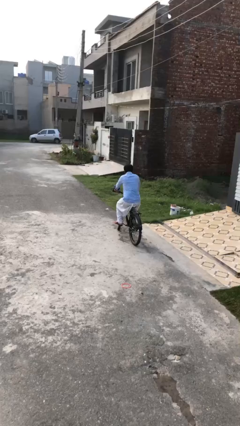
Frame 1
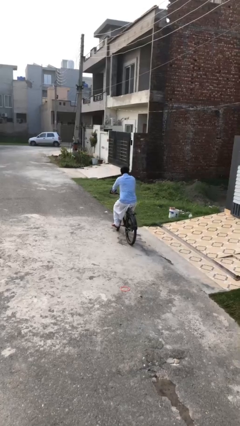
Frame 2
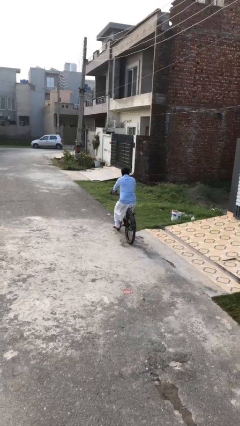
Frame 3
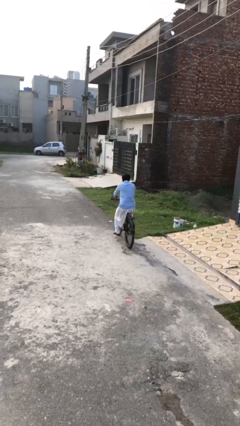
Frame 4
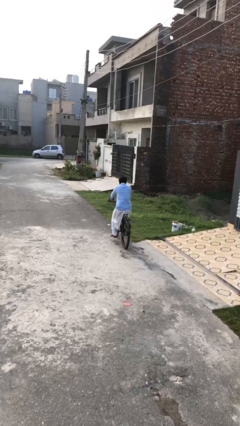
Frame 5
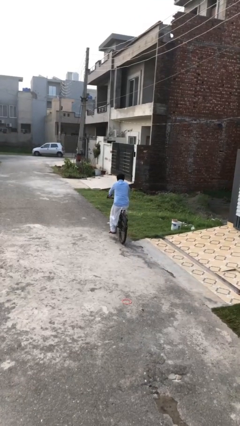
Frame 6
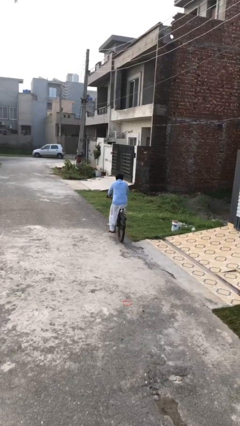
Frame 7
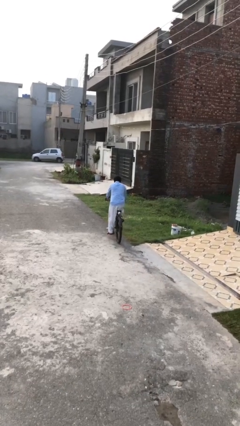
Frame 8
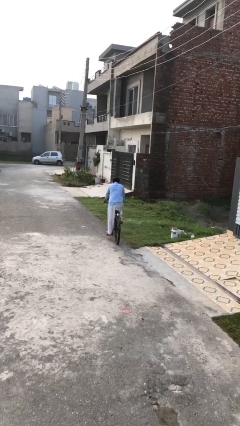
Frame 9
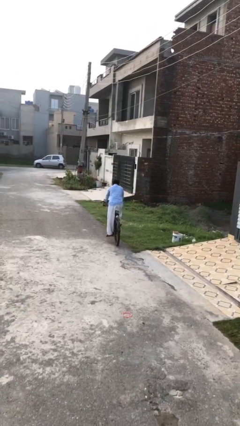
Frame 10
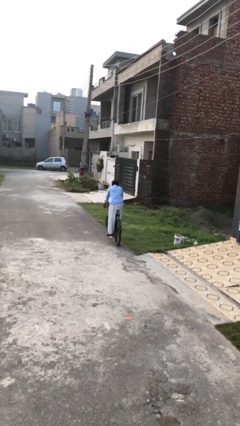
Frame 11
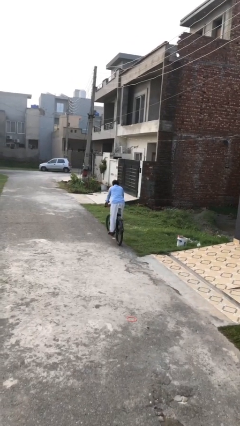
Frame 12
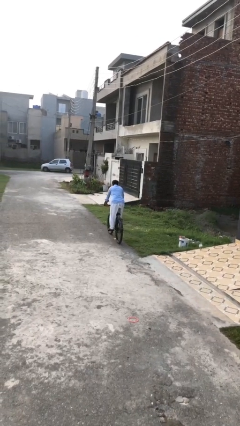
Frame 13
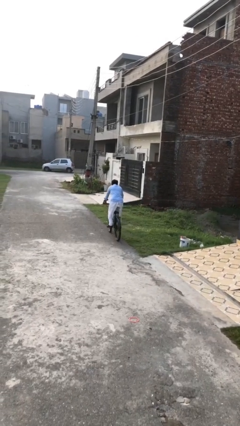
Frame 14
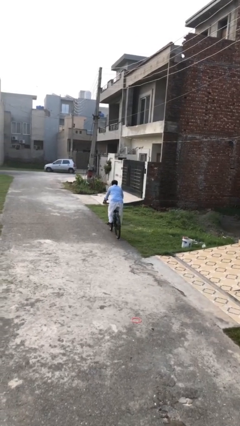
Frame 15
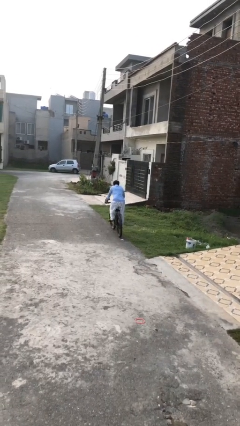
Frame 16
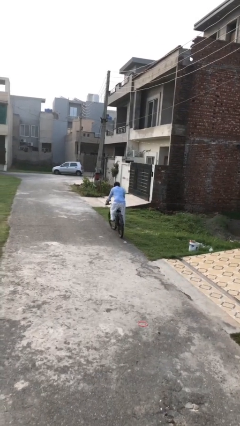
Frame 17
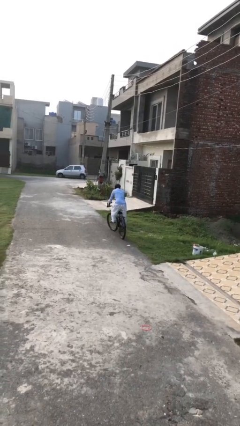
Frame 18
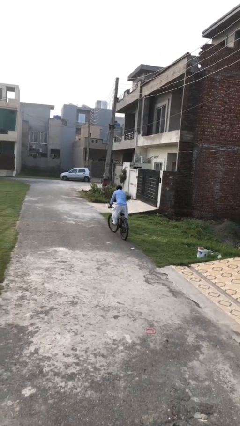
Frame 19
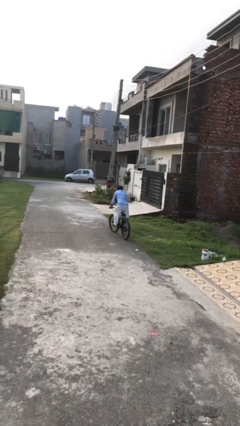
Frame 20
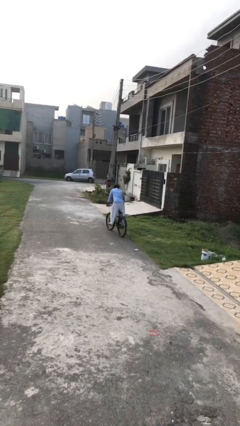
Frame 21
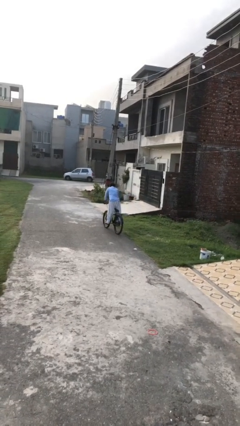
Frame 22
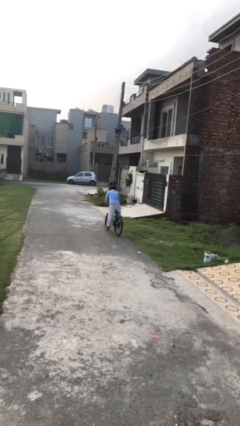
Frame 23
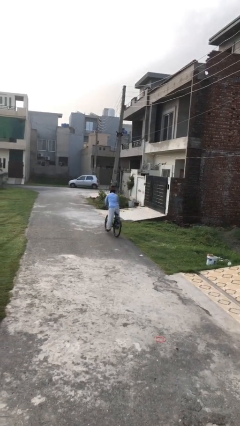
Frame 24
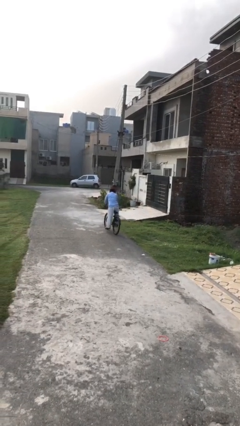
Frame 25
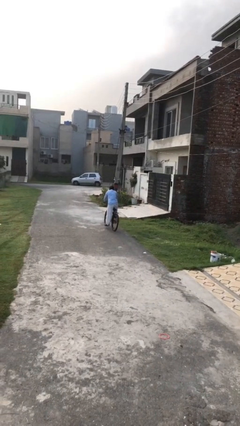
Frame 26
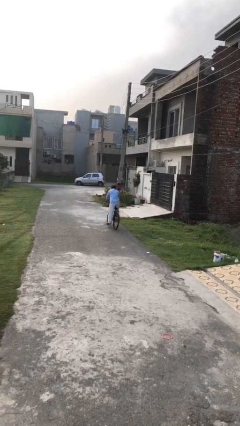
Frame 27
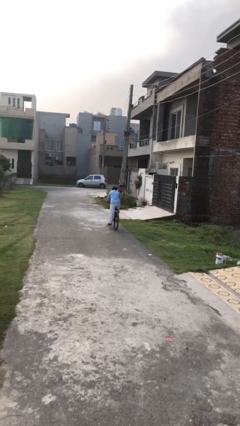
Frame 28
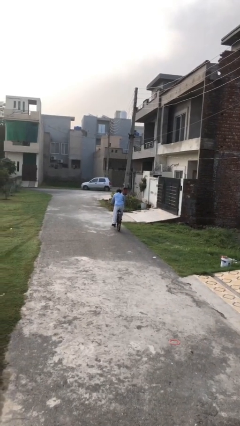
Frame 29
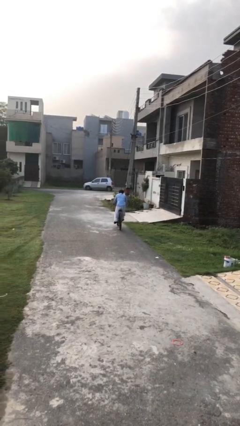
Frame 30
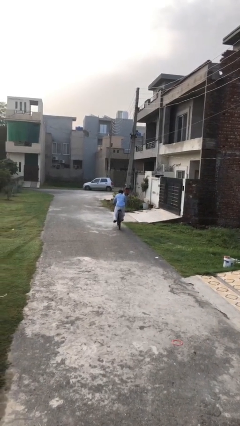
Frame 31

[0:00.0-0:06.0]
person rides bicycle

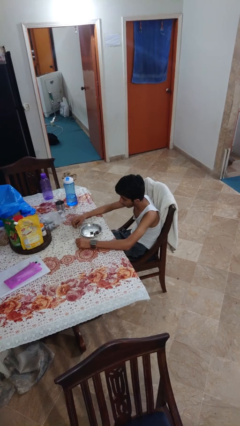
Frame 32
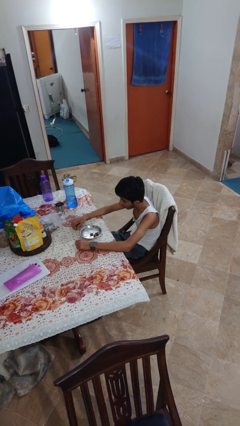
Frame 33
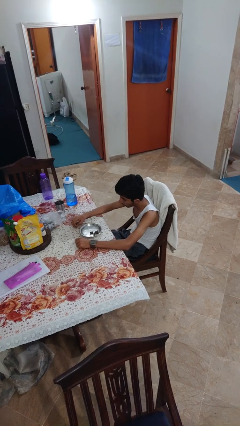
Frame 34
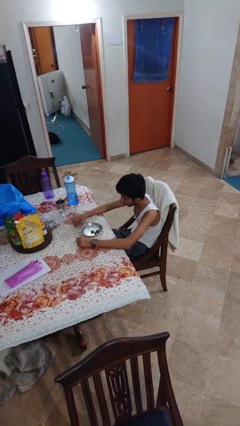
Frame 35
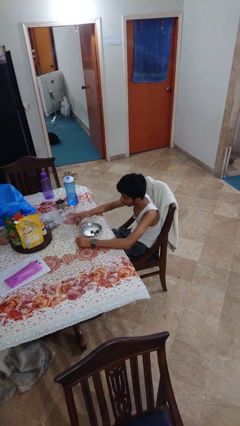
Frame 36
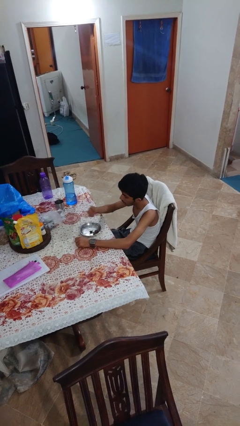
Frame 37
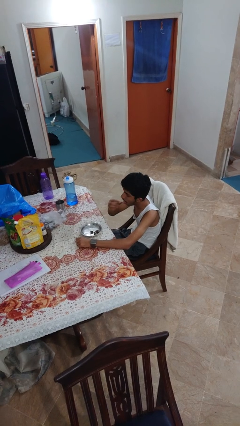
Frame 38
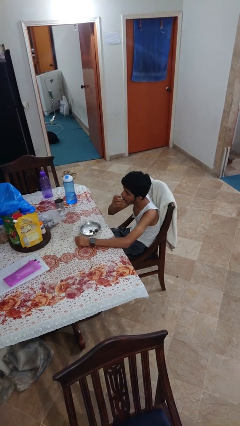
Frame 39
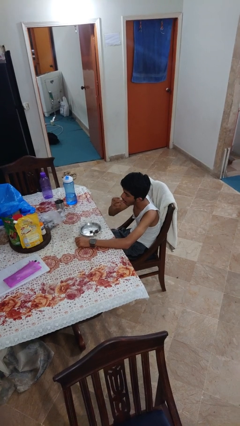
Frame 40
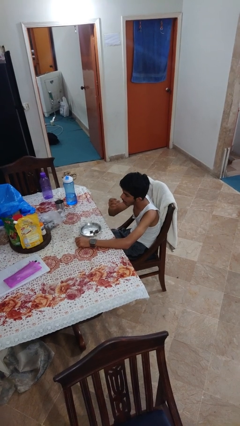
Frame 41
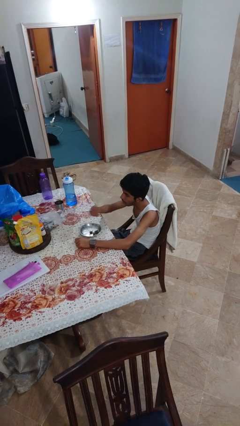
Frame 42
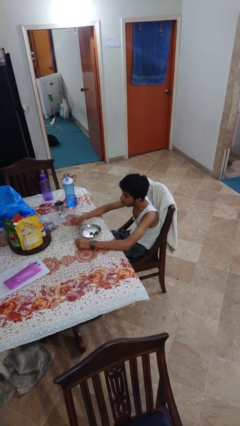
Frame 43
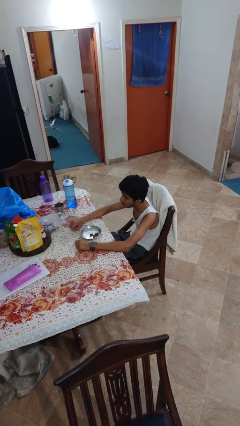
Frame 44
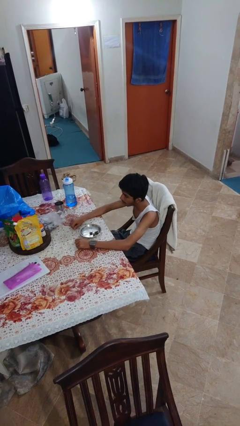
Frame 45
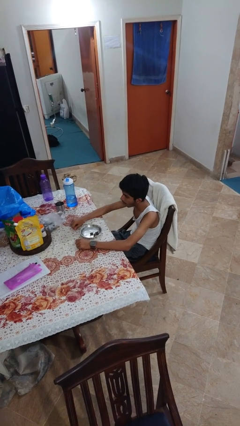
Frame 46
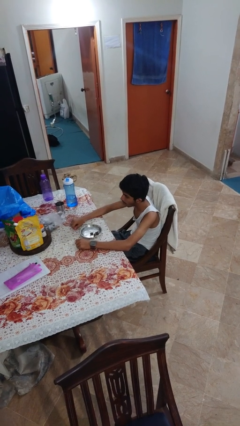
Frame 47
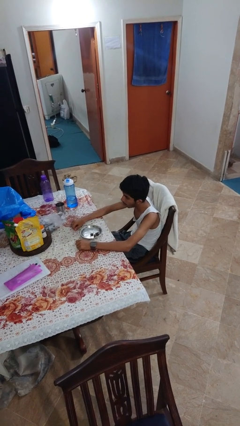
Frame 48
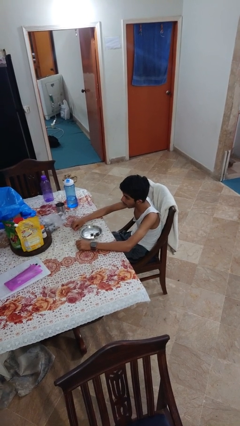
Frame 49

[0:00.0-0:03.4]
person eats with hands

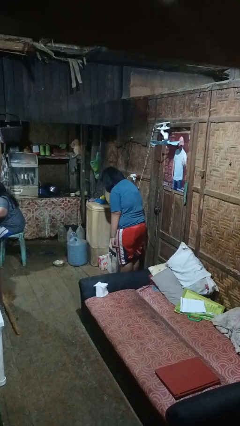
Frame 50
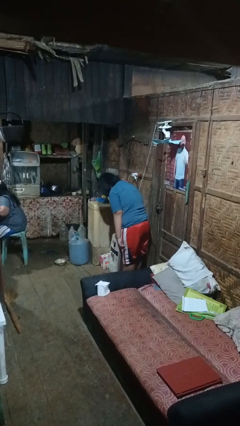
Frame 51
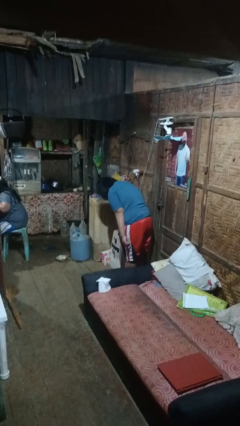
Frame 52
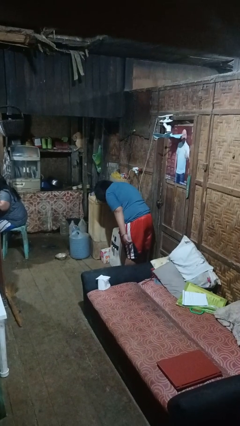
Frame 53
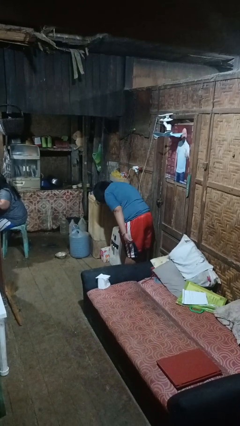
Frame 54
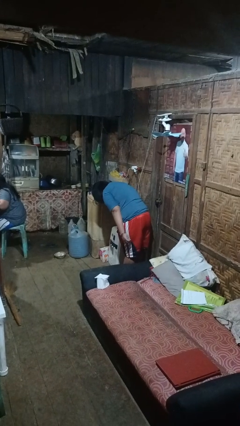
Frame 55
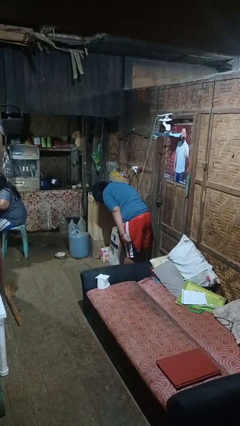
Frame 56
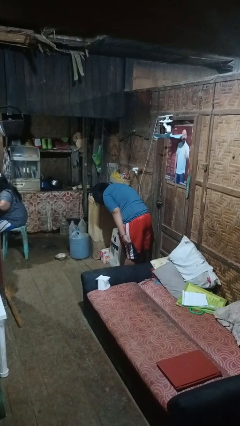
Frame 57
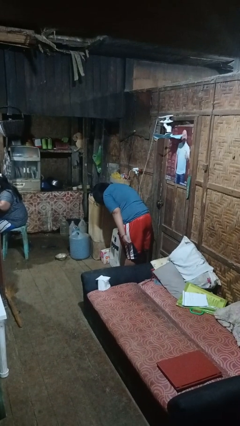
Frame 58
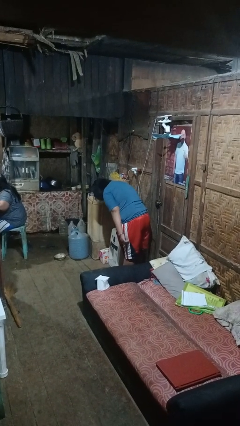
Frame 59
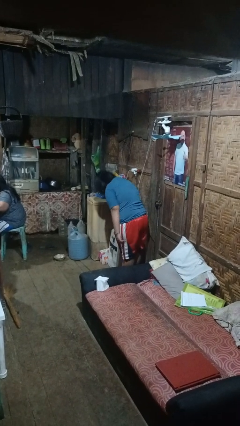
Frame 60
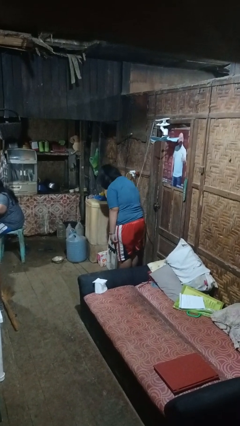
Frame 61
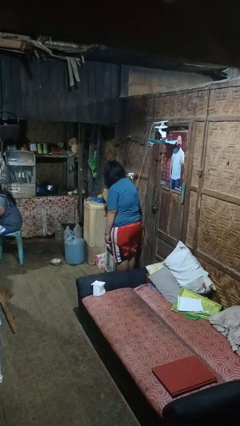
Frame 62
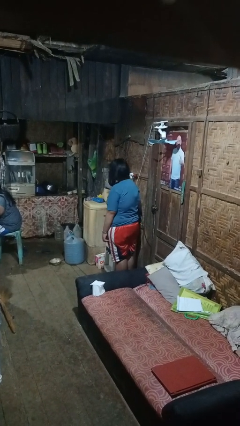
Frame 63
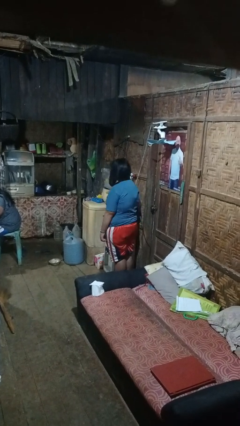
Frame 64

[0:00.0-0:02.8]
person bows

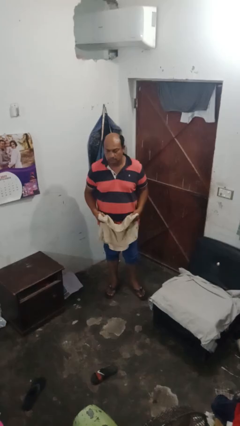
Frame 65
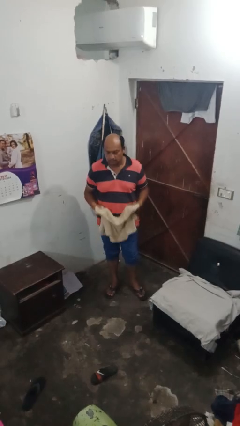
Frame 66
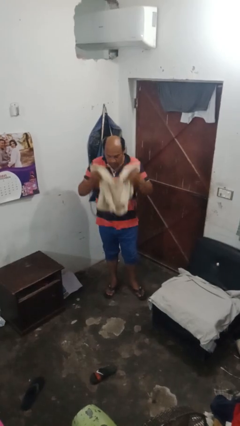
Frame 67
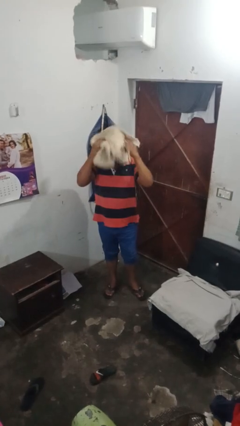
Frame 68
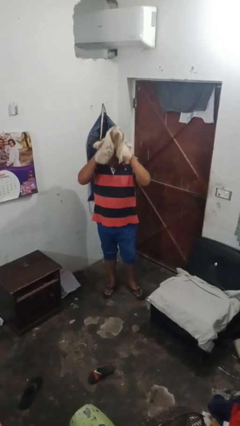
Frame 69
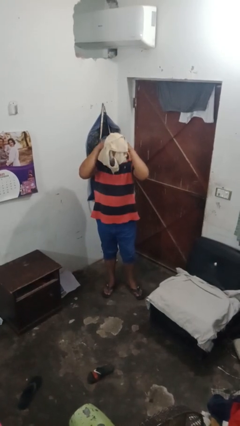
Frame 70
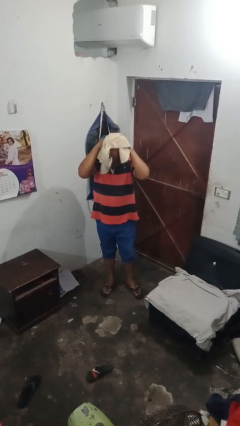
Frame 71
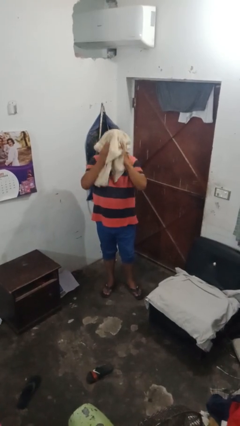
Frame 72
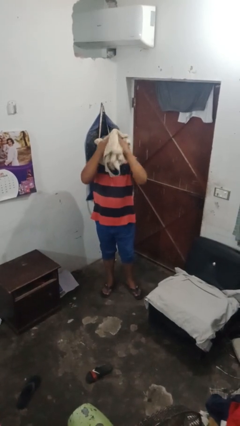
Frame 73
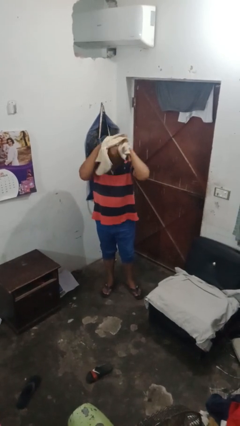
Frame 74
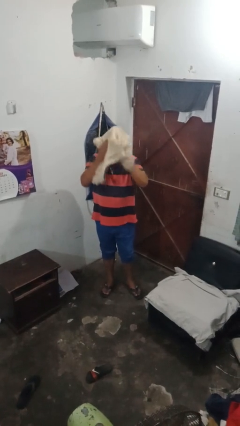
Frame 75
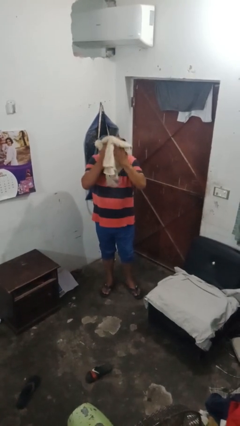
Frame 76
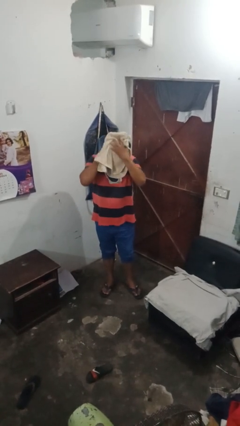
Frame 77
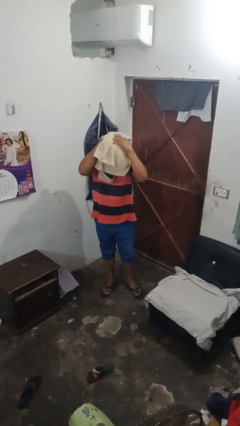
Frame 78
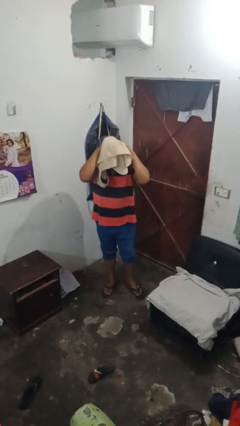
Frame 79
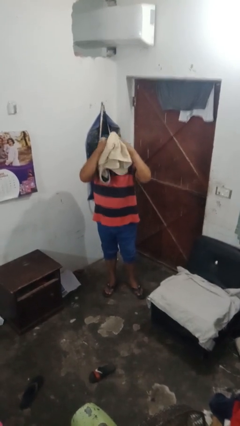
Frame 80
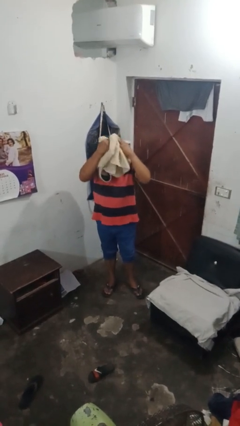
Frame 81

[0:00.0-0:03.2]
person dries hair with towel

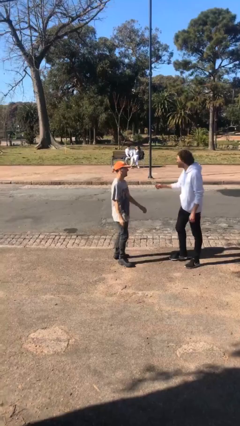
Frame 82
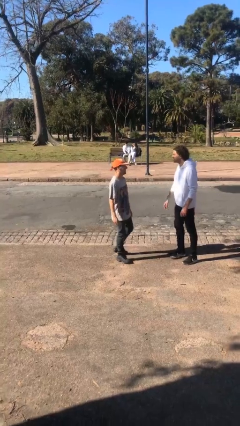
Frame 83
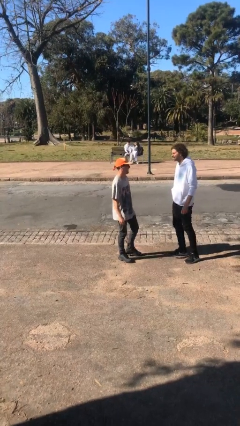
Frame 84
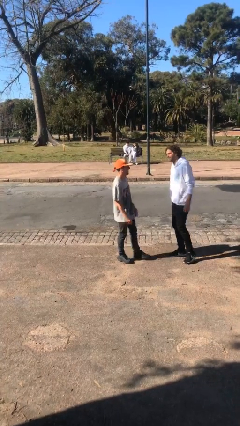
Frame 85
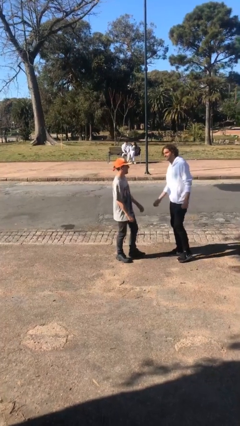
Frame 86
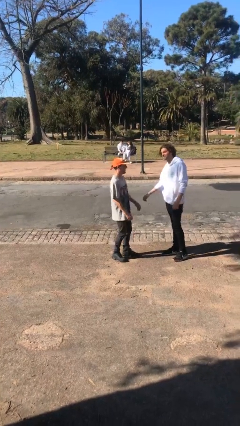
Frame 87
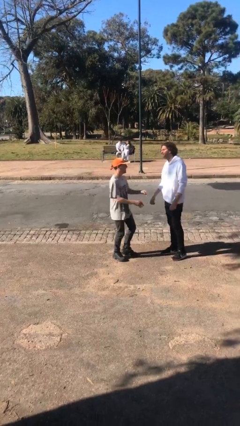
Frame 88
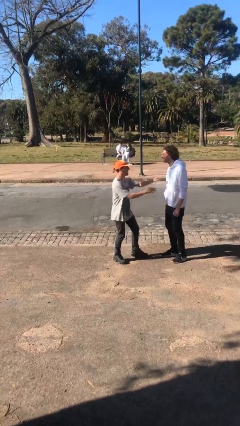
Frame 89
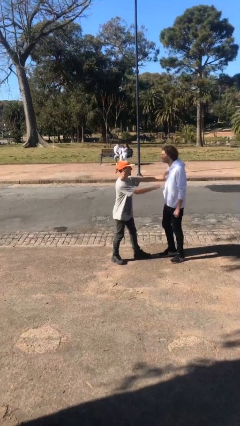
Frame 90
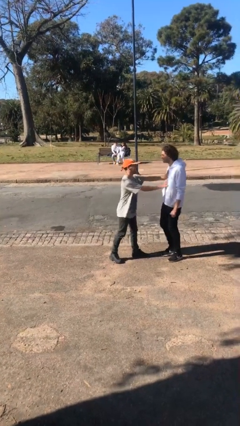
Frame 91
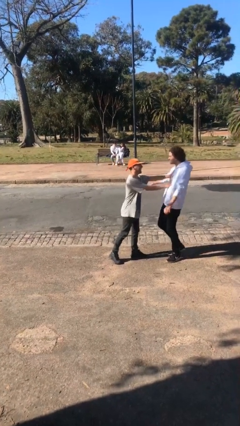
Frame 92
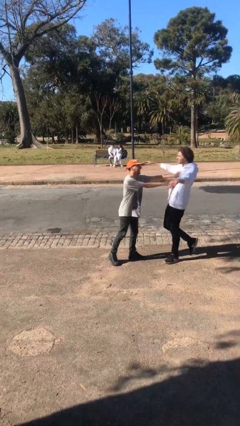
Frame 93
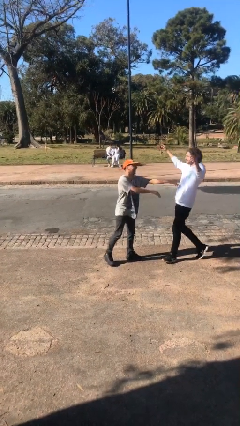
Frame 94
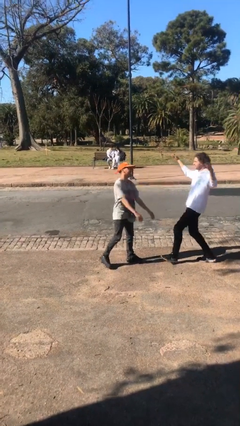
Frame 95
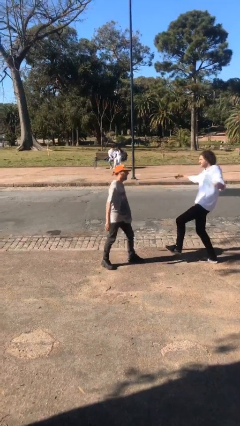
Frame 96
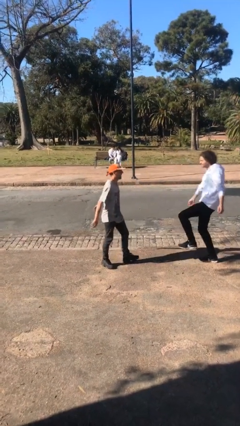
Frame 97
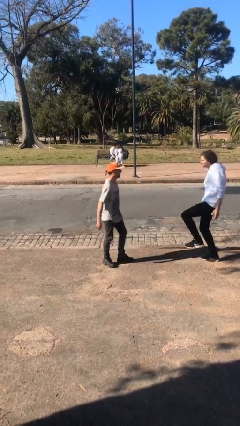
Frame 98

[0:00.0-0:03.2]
person shoves person
